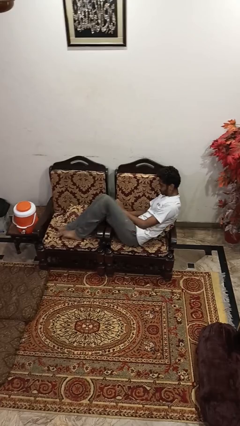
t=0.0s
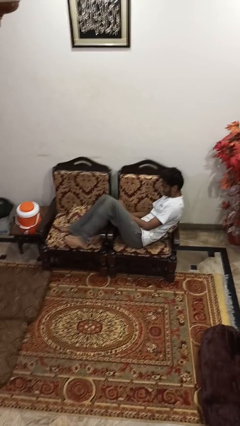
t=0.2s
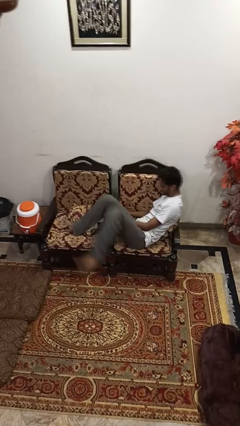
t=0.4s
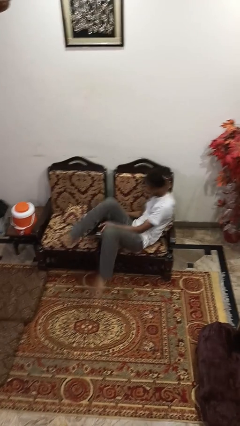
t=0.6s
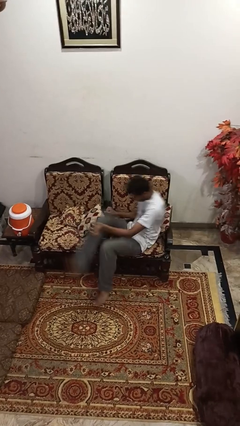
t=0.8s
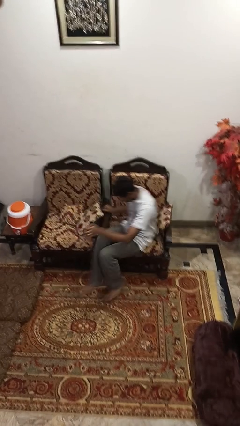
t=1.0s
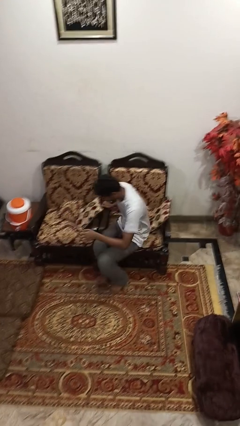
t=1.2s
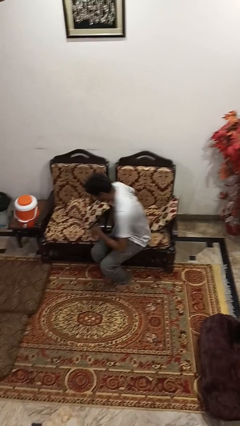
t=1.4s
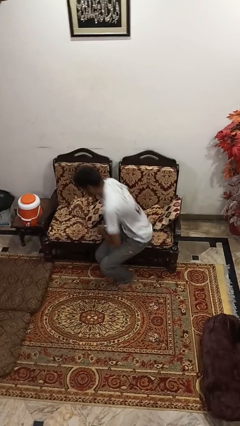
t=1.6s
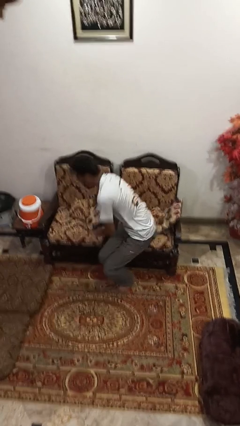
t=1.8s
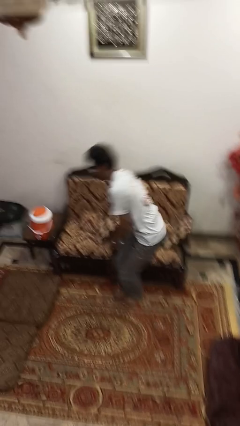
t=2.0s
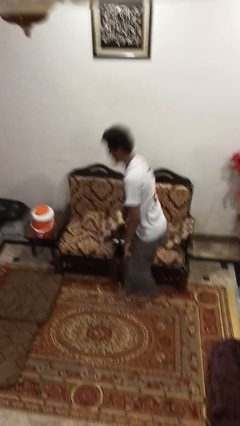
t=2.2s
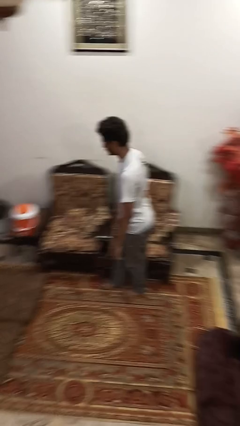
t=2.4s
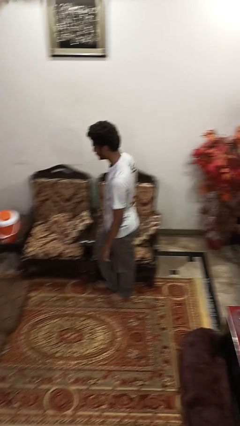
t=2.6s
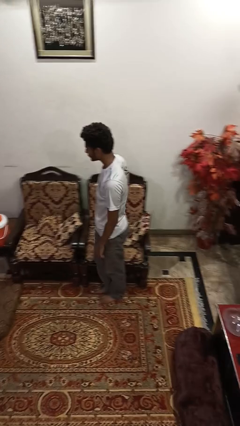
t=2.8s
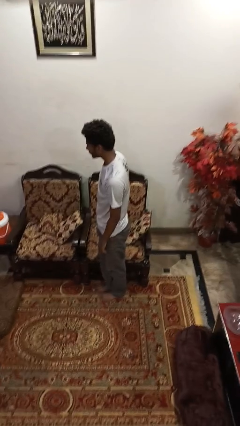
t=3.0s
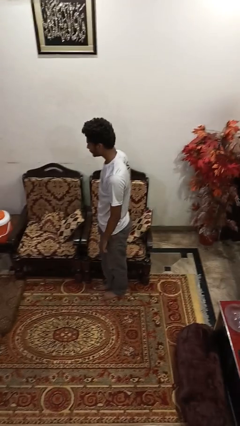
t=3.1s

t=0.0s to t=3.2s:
person stands up

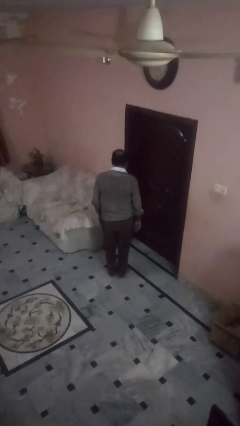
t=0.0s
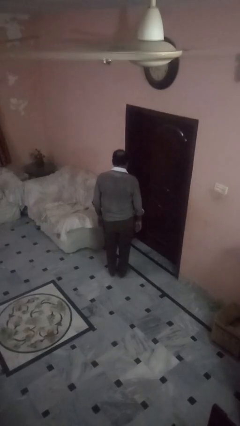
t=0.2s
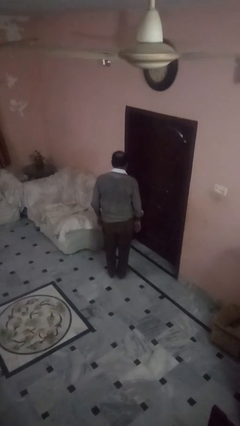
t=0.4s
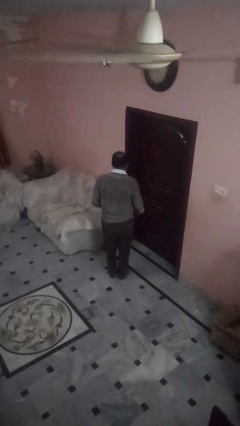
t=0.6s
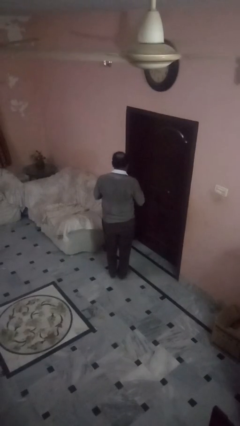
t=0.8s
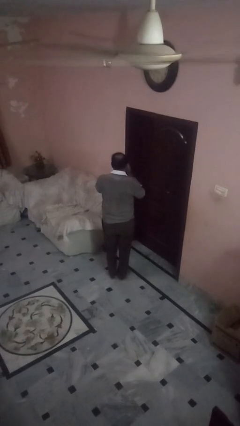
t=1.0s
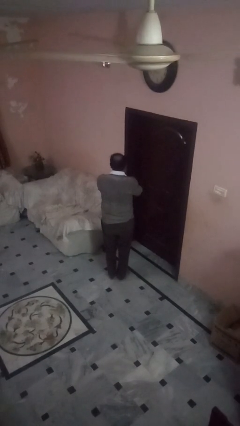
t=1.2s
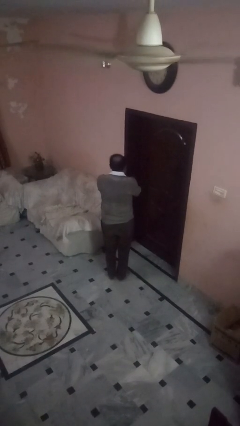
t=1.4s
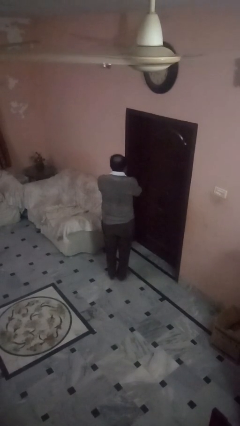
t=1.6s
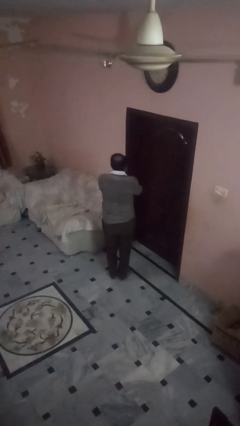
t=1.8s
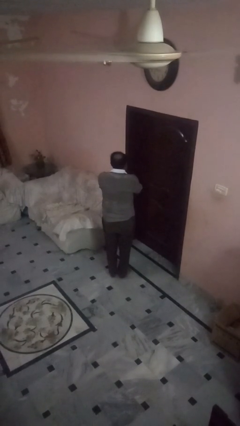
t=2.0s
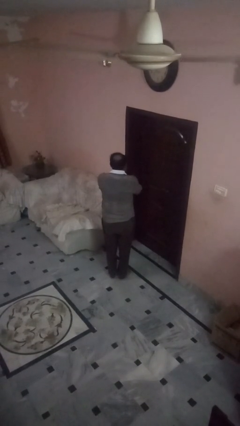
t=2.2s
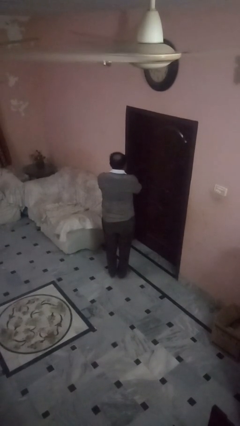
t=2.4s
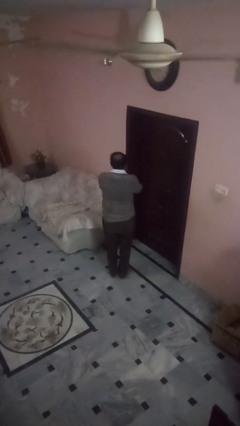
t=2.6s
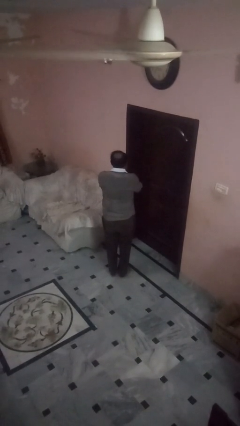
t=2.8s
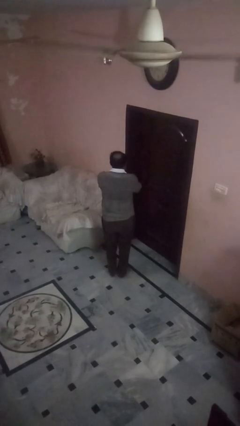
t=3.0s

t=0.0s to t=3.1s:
person covers face with hands

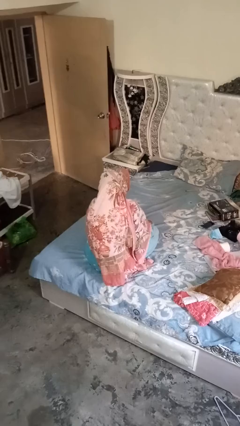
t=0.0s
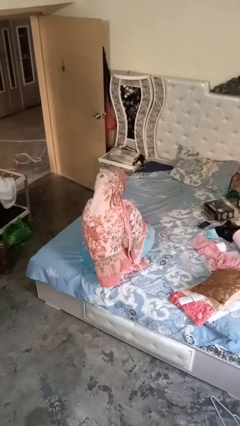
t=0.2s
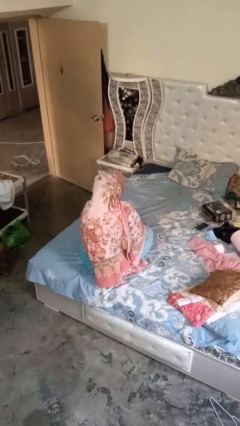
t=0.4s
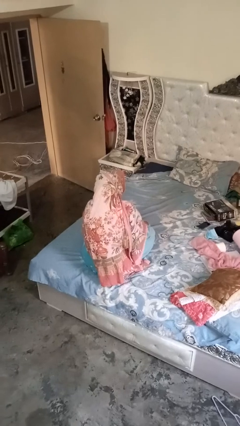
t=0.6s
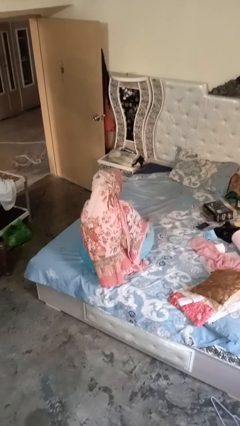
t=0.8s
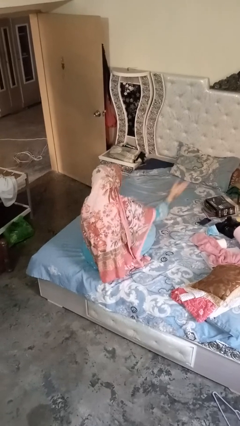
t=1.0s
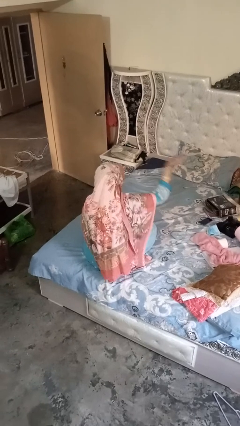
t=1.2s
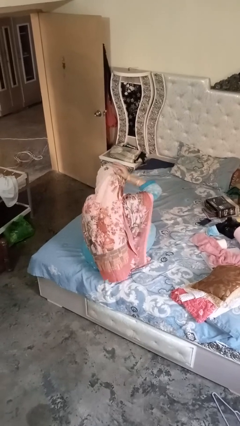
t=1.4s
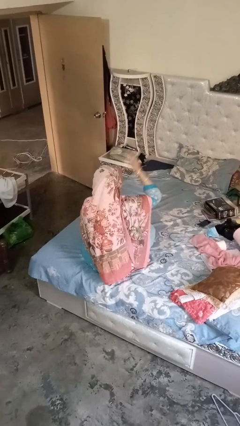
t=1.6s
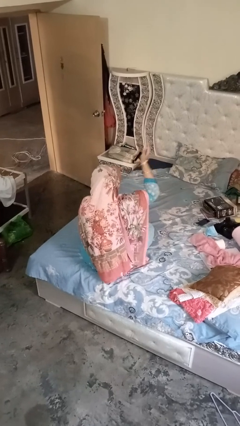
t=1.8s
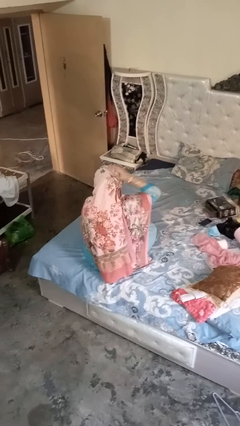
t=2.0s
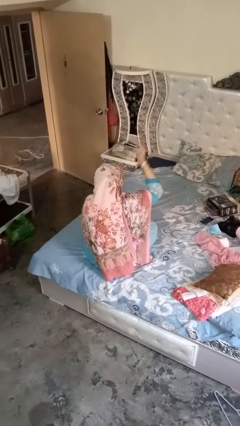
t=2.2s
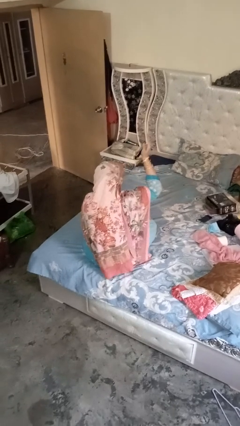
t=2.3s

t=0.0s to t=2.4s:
person pats head

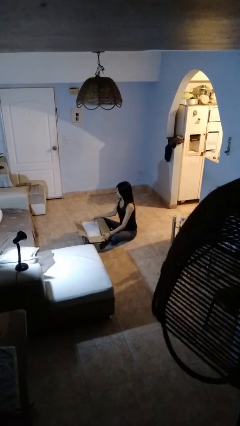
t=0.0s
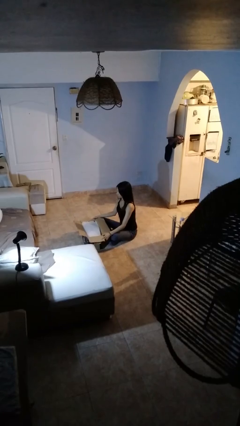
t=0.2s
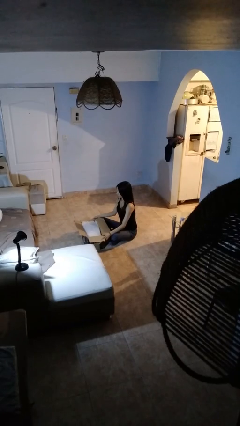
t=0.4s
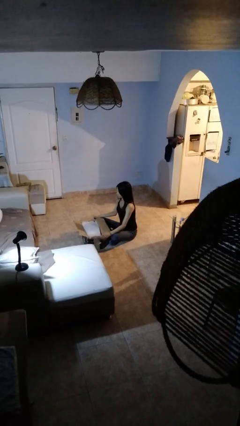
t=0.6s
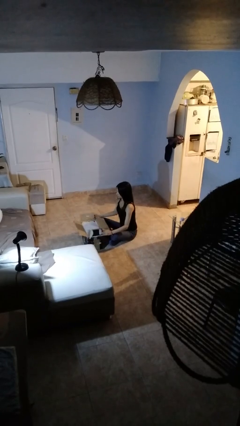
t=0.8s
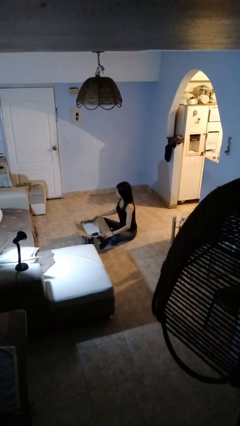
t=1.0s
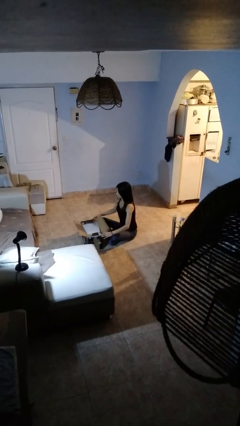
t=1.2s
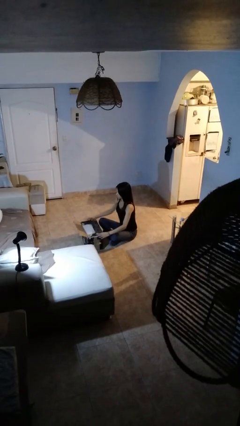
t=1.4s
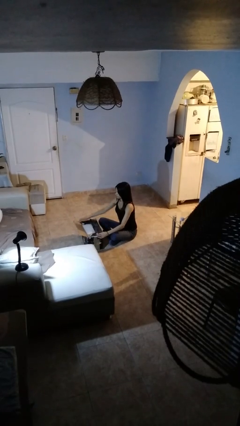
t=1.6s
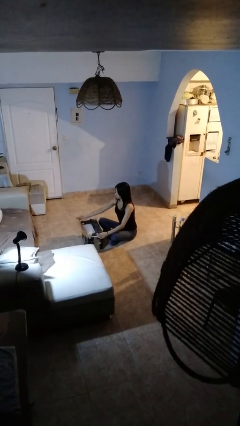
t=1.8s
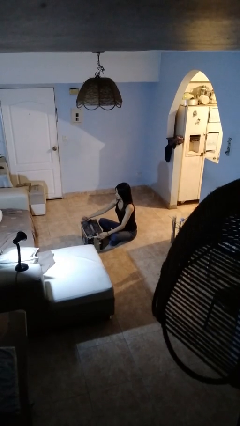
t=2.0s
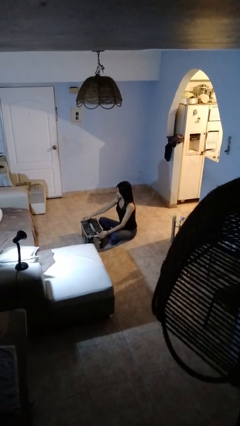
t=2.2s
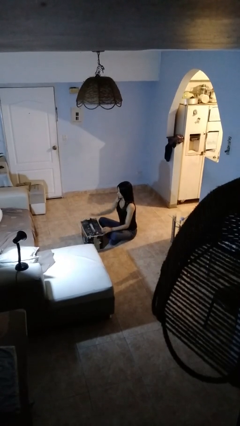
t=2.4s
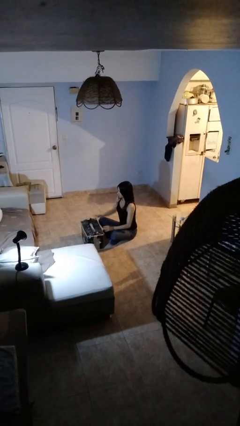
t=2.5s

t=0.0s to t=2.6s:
person closes box

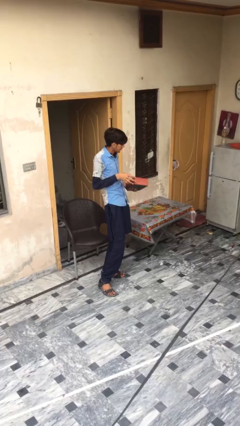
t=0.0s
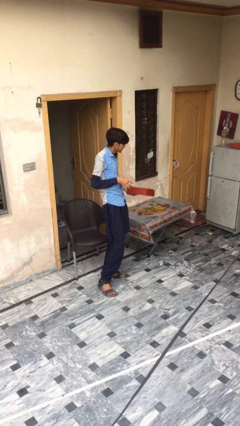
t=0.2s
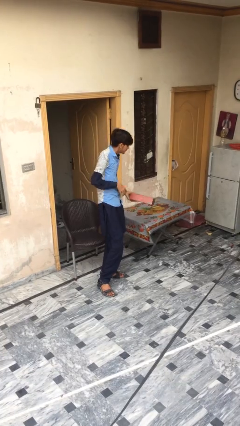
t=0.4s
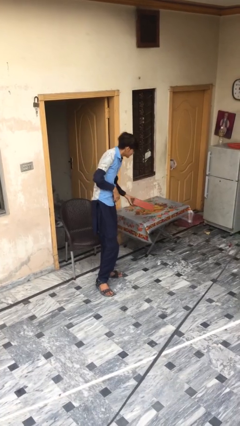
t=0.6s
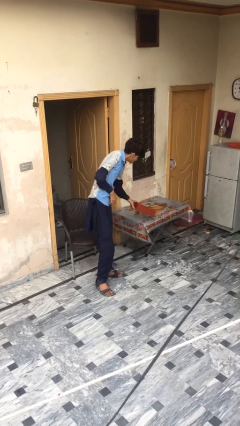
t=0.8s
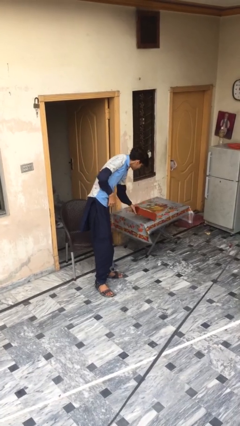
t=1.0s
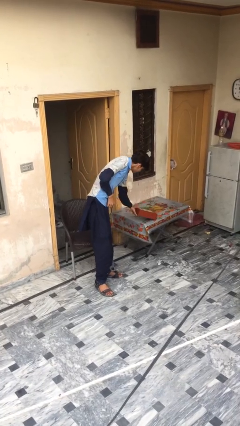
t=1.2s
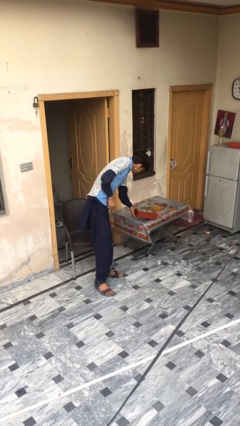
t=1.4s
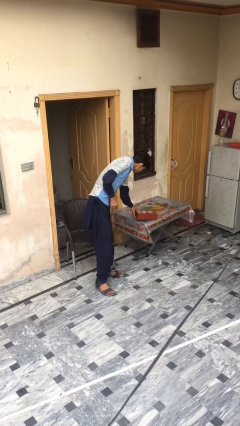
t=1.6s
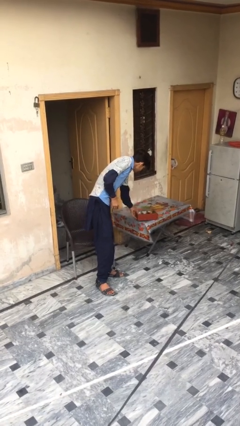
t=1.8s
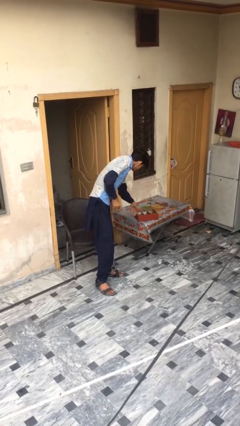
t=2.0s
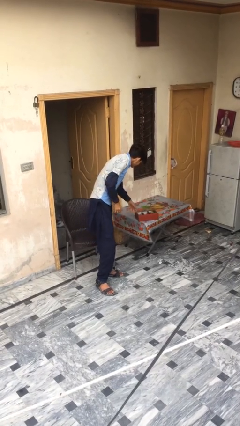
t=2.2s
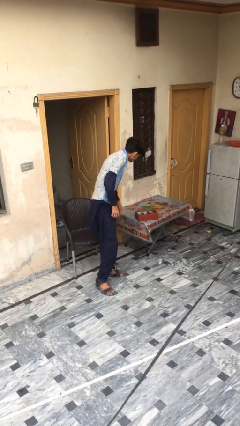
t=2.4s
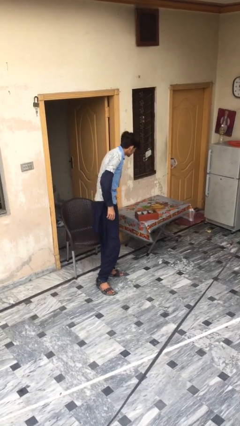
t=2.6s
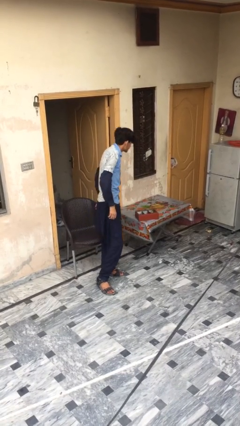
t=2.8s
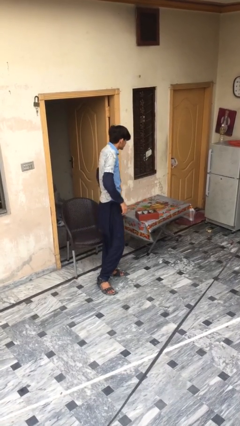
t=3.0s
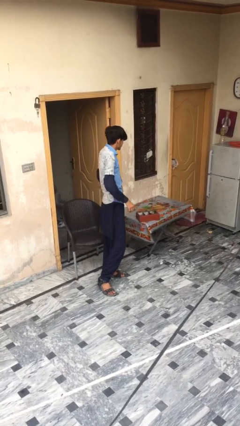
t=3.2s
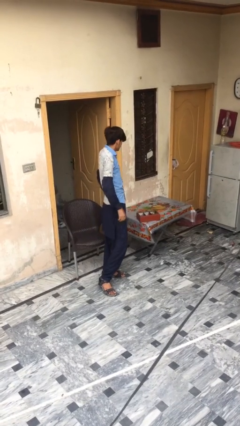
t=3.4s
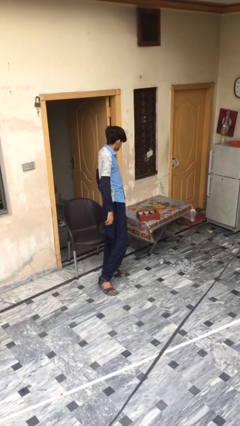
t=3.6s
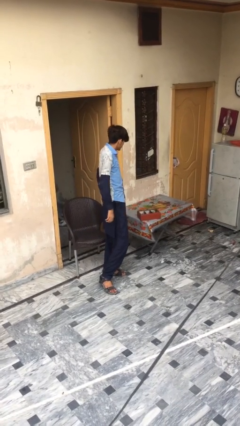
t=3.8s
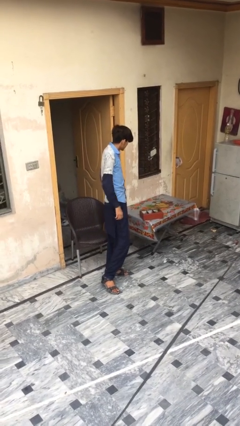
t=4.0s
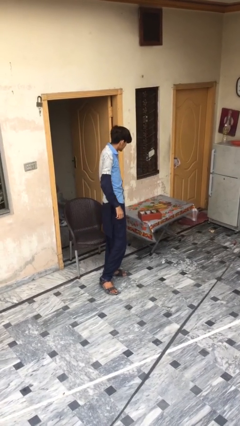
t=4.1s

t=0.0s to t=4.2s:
person puts down object on table

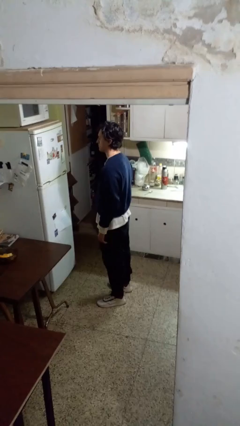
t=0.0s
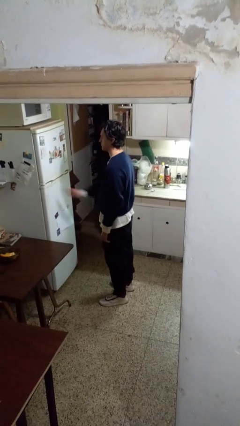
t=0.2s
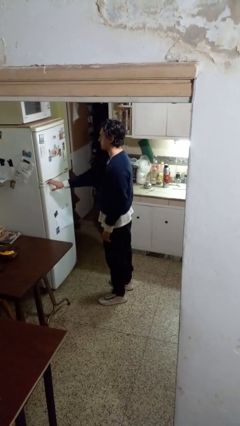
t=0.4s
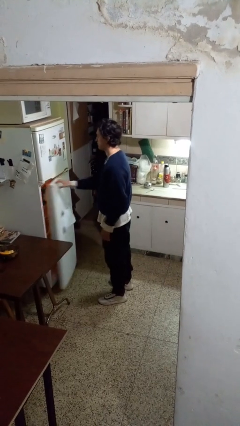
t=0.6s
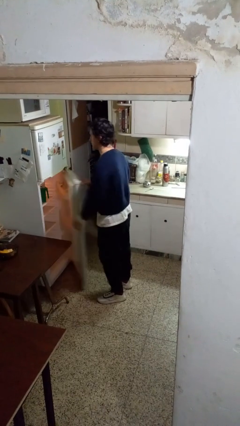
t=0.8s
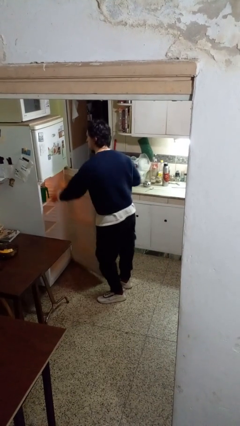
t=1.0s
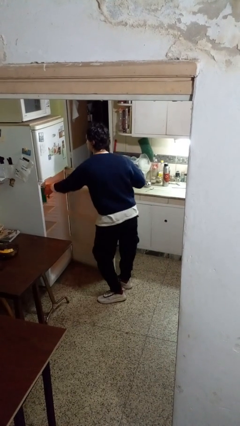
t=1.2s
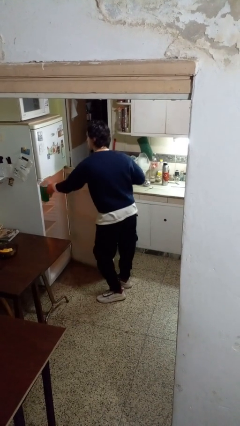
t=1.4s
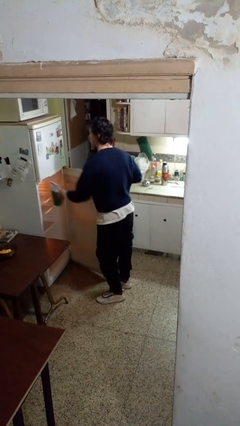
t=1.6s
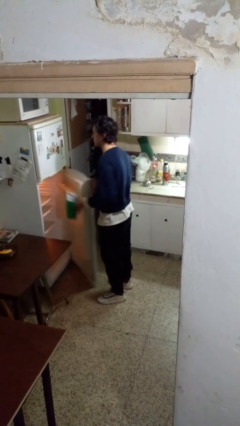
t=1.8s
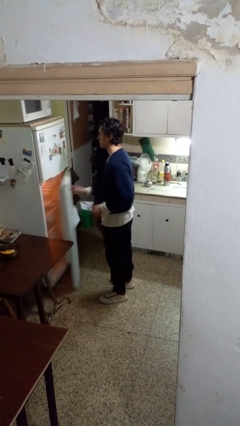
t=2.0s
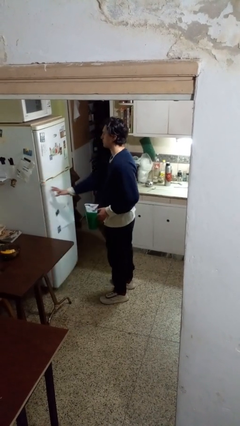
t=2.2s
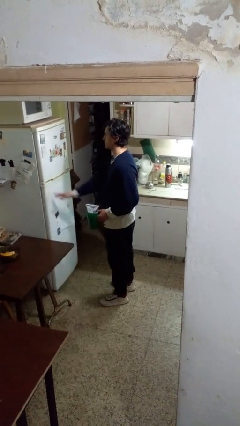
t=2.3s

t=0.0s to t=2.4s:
person takes object from refrigerator
